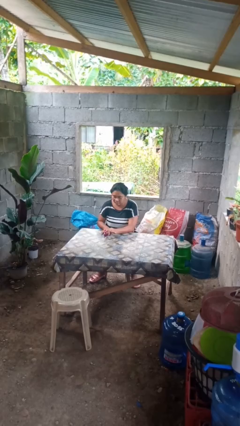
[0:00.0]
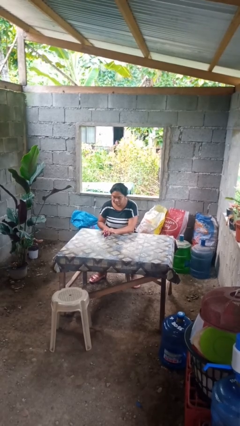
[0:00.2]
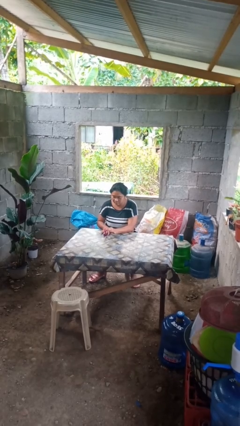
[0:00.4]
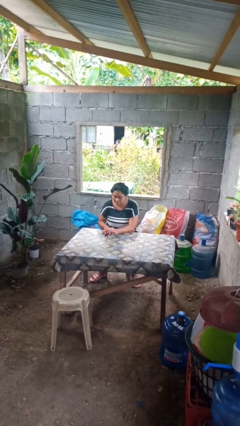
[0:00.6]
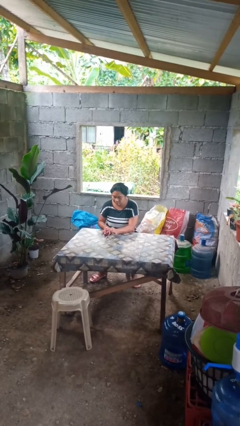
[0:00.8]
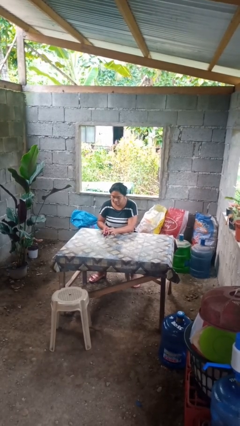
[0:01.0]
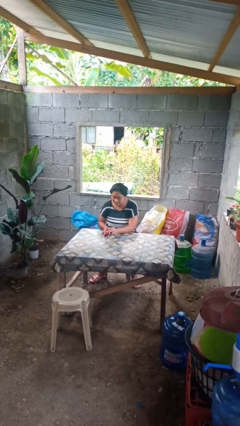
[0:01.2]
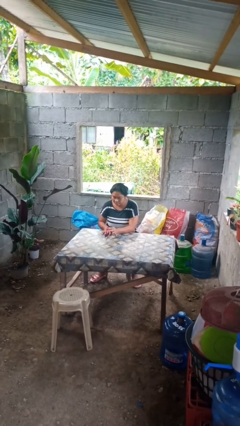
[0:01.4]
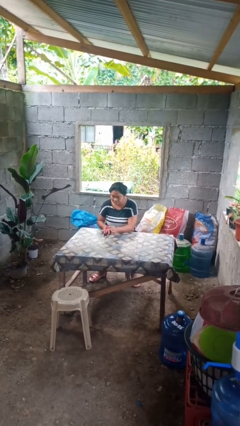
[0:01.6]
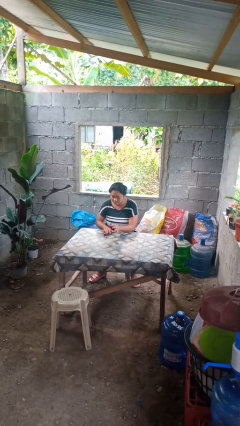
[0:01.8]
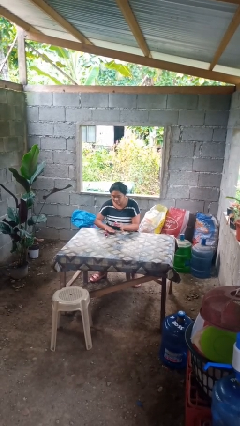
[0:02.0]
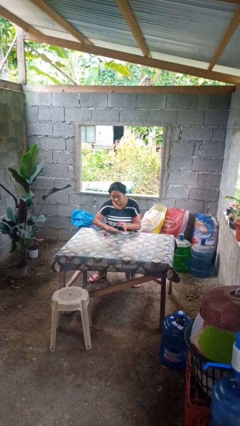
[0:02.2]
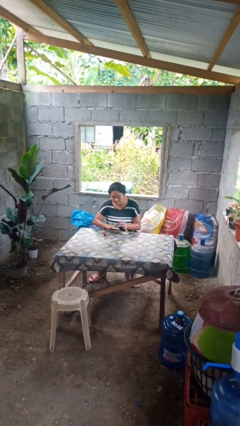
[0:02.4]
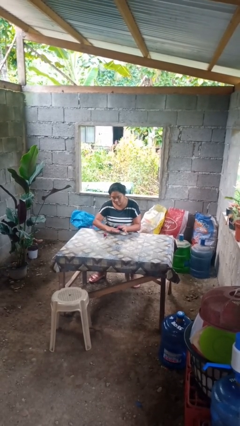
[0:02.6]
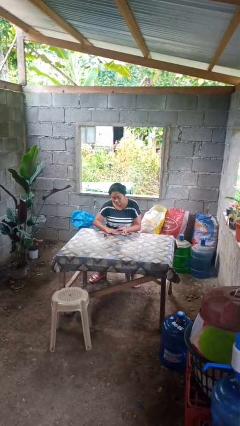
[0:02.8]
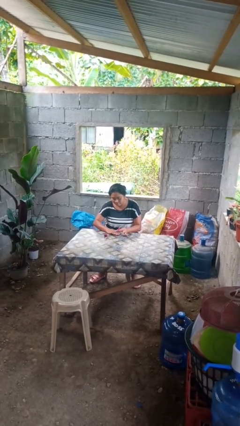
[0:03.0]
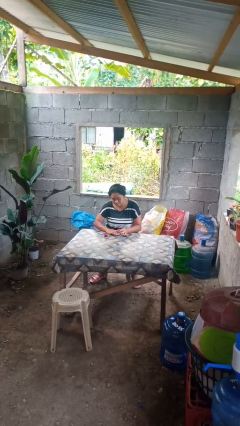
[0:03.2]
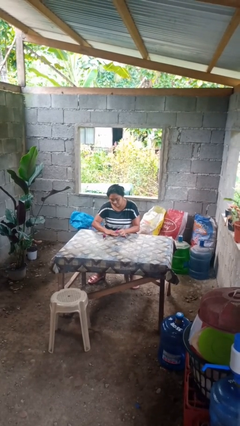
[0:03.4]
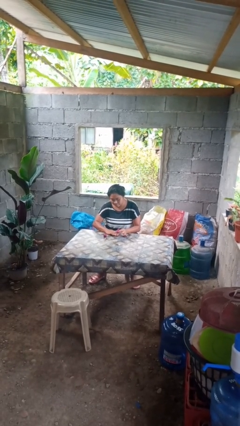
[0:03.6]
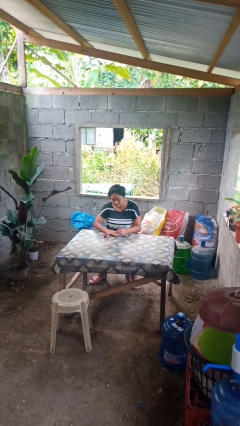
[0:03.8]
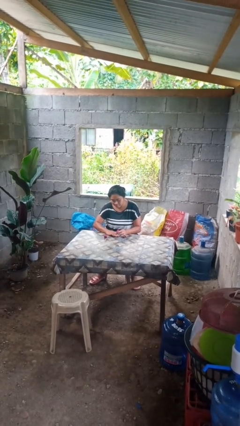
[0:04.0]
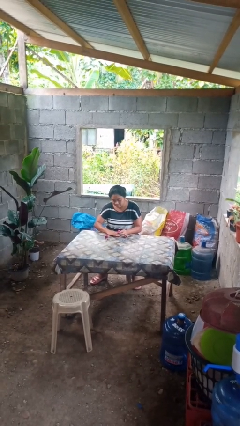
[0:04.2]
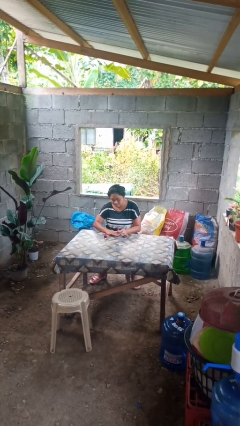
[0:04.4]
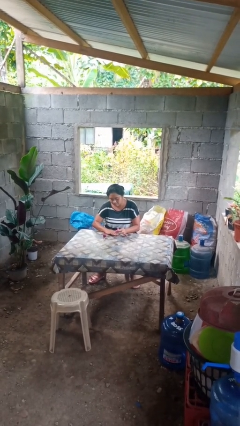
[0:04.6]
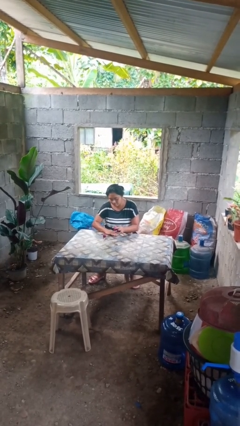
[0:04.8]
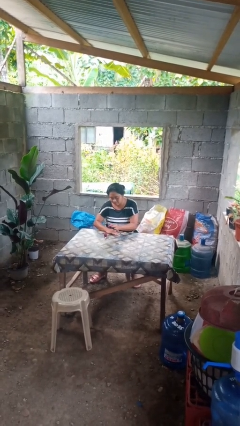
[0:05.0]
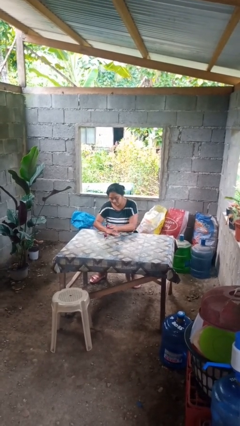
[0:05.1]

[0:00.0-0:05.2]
person paints fingernails

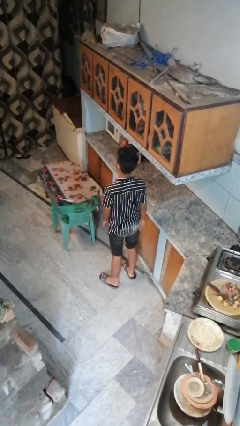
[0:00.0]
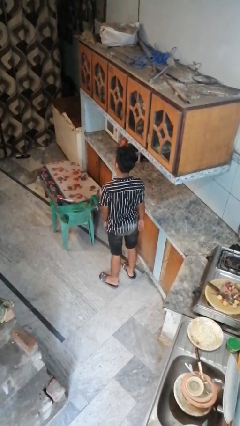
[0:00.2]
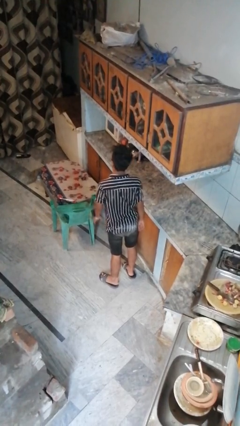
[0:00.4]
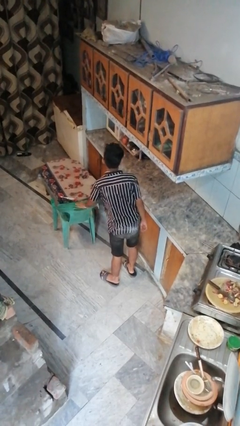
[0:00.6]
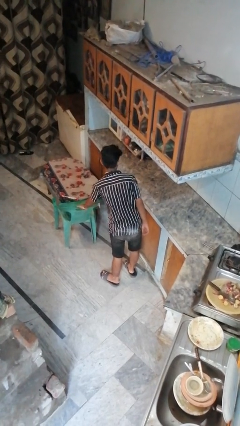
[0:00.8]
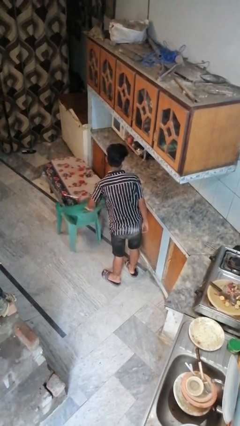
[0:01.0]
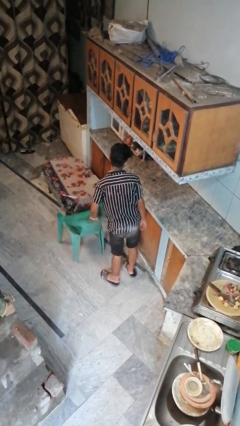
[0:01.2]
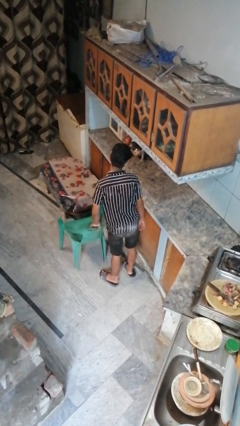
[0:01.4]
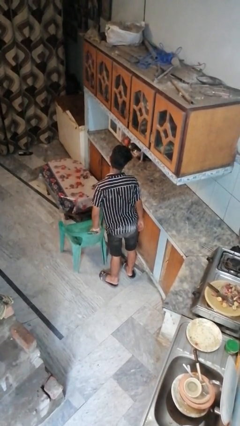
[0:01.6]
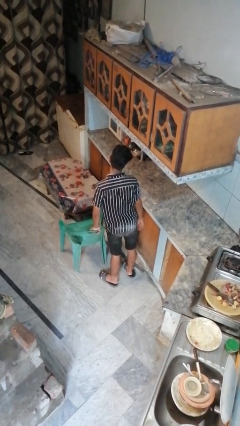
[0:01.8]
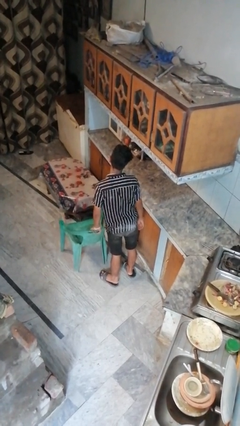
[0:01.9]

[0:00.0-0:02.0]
person pulls out chair

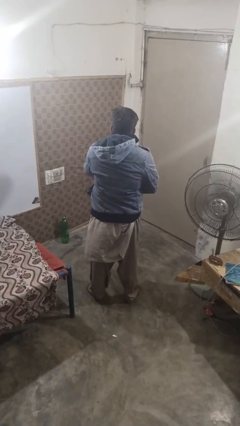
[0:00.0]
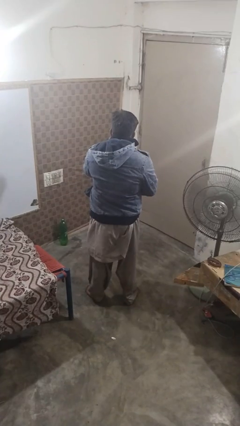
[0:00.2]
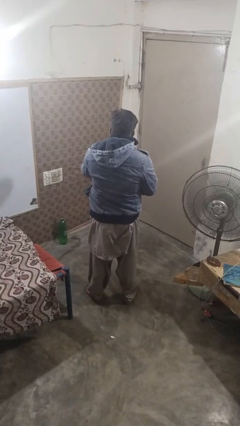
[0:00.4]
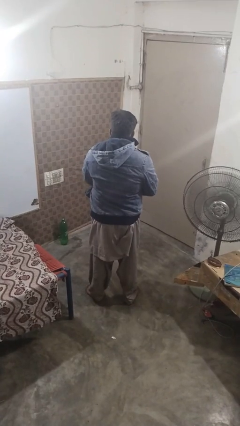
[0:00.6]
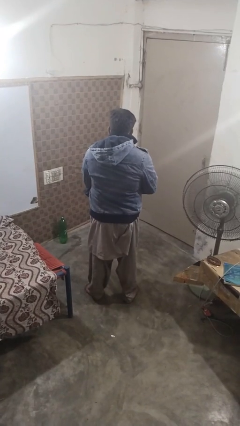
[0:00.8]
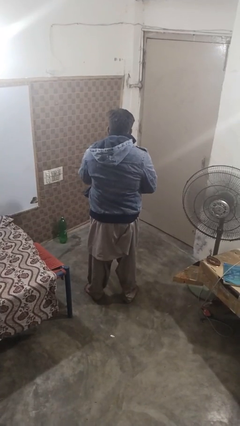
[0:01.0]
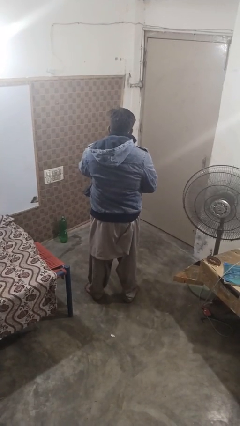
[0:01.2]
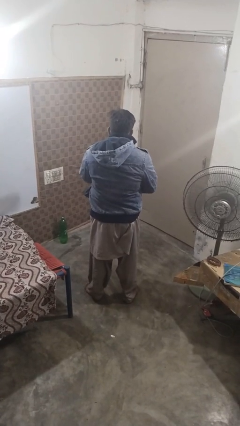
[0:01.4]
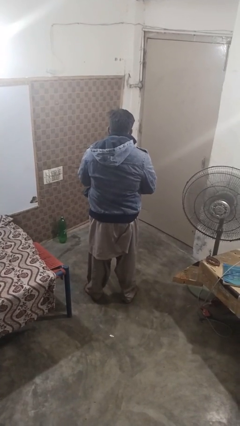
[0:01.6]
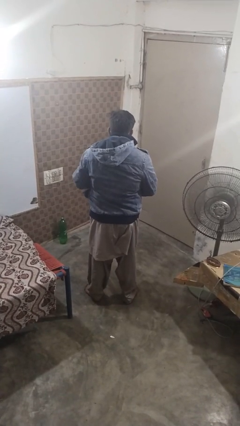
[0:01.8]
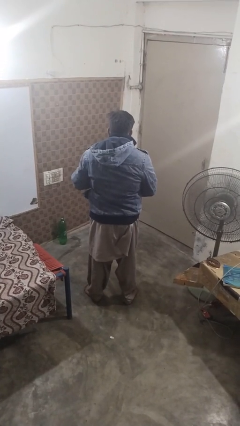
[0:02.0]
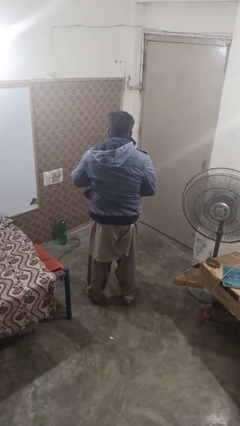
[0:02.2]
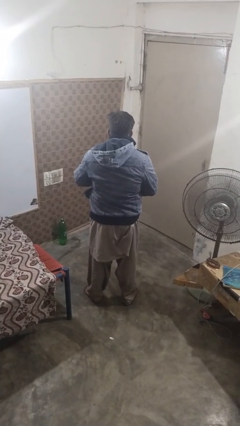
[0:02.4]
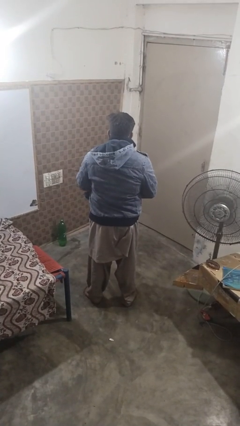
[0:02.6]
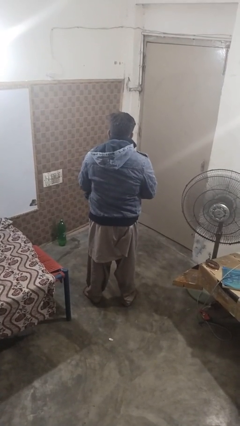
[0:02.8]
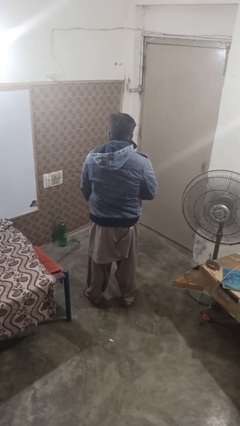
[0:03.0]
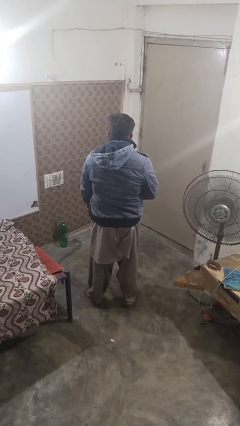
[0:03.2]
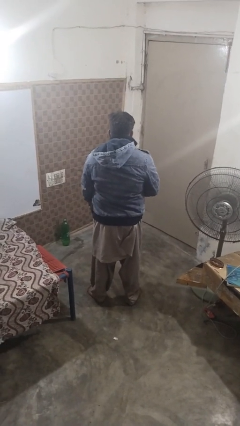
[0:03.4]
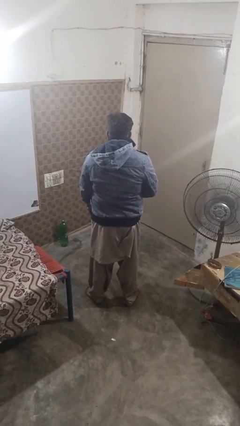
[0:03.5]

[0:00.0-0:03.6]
person zips up jacket

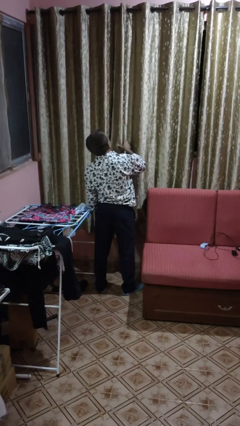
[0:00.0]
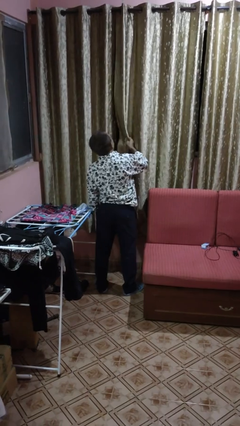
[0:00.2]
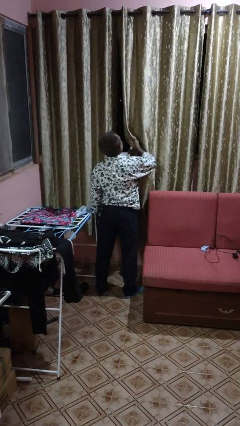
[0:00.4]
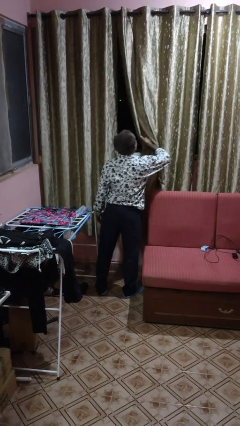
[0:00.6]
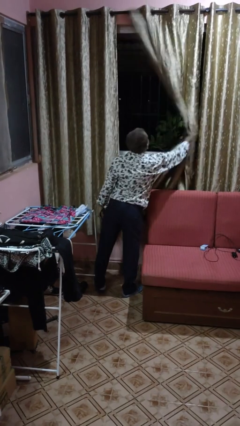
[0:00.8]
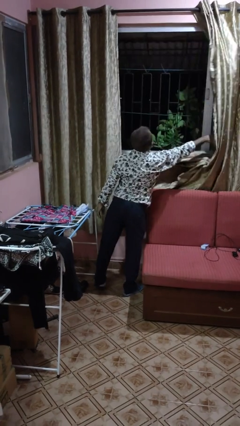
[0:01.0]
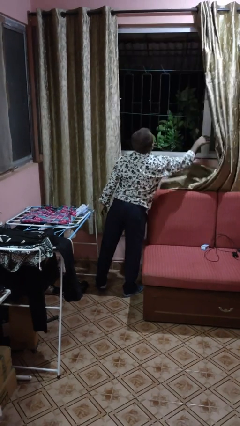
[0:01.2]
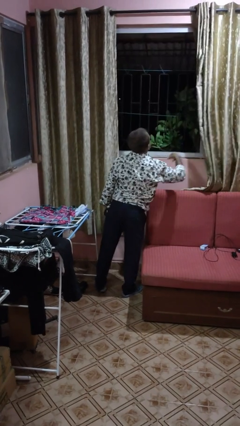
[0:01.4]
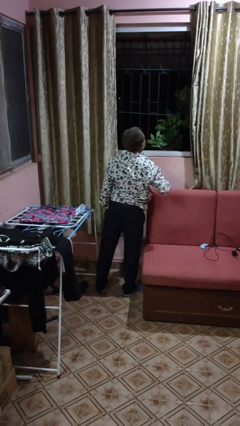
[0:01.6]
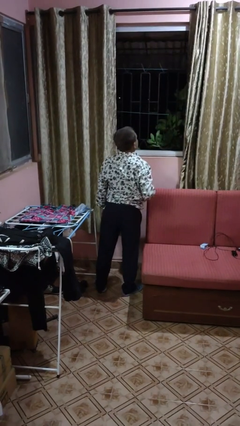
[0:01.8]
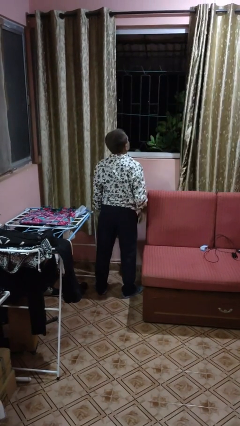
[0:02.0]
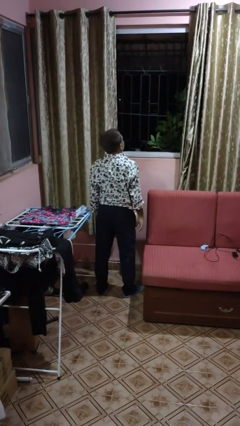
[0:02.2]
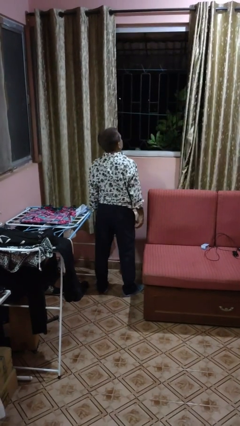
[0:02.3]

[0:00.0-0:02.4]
person opens curtains

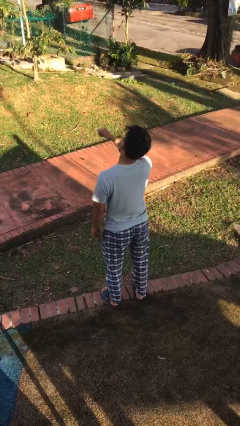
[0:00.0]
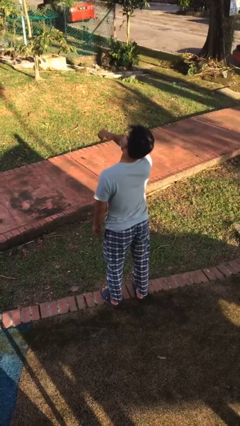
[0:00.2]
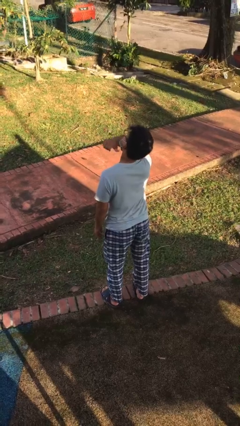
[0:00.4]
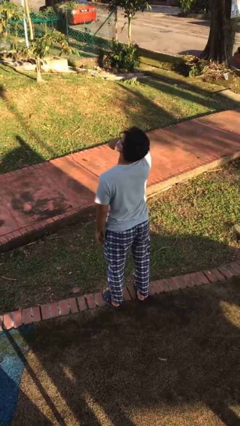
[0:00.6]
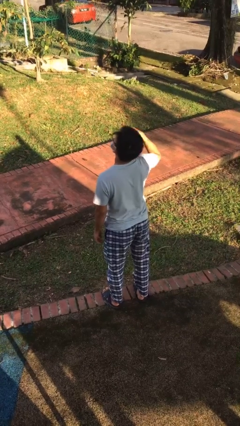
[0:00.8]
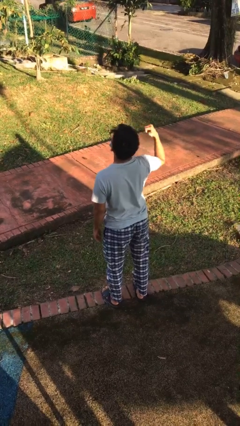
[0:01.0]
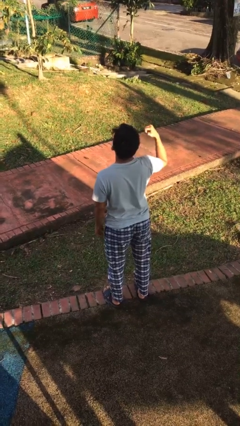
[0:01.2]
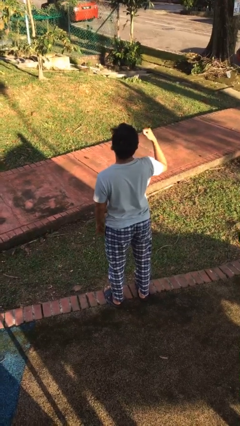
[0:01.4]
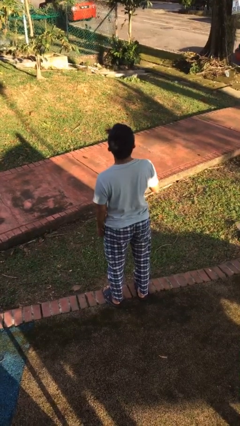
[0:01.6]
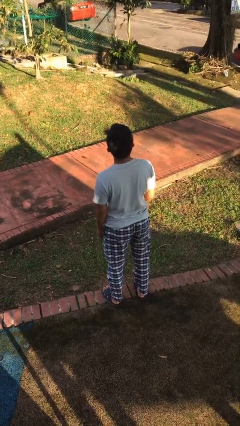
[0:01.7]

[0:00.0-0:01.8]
person gestures cut

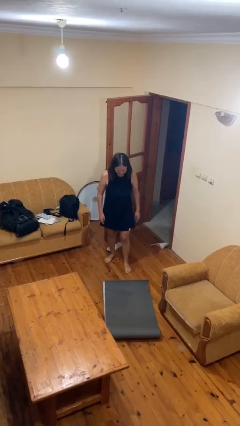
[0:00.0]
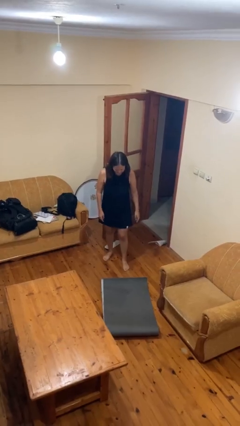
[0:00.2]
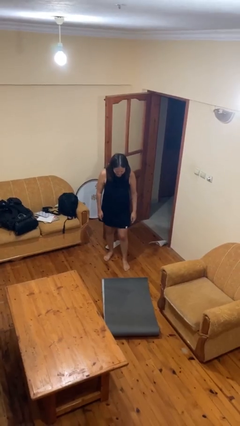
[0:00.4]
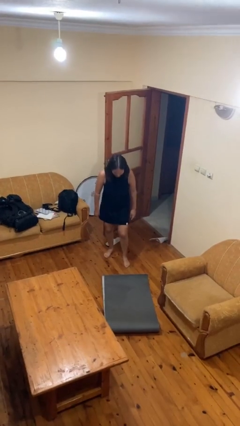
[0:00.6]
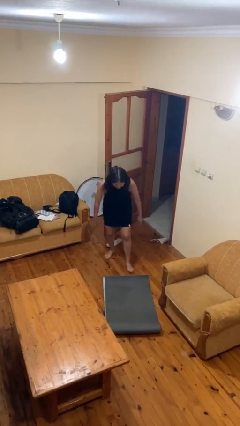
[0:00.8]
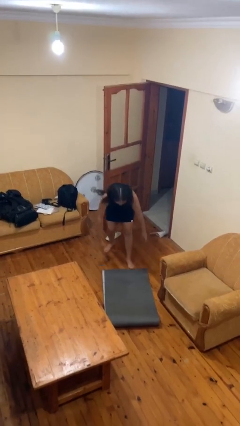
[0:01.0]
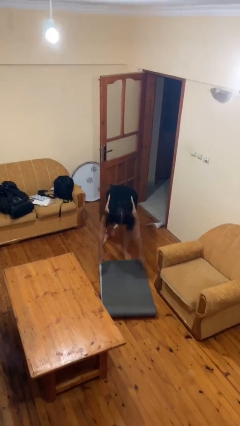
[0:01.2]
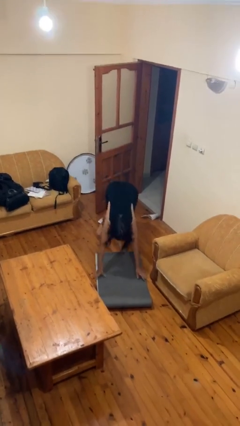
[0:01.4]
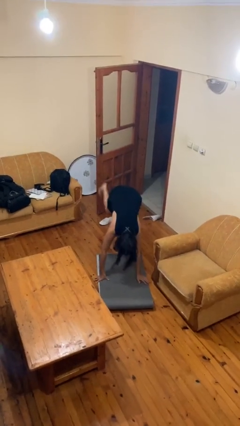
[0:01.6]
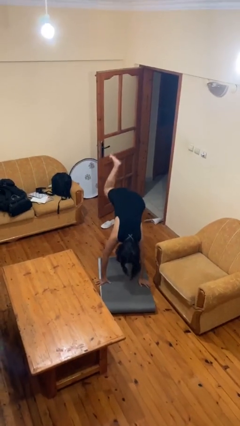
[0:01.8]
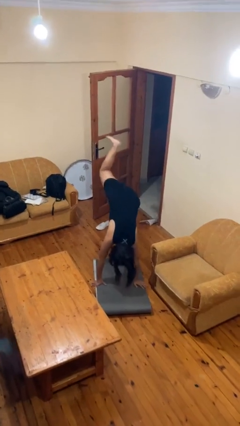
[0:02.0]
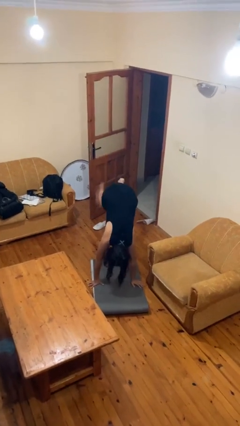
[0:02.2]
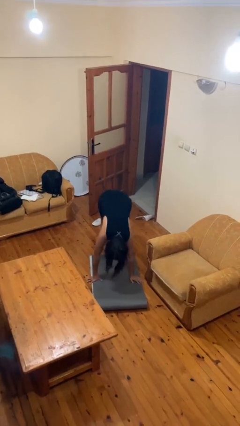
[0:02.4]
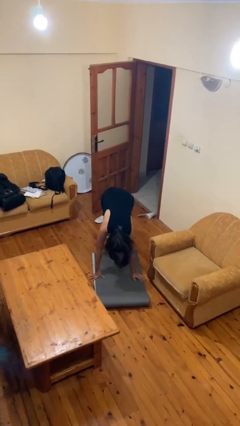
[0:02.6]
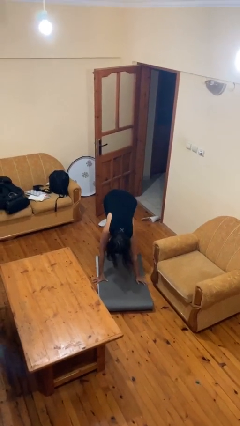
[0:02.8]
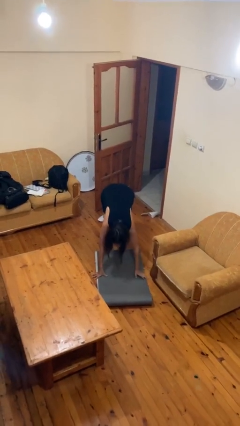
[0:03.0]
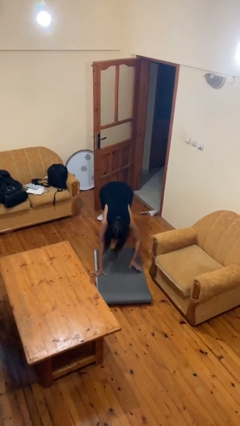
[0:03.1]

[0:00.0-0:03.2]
person handstand
